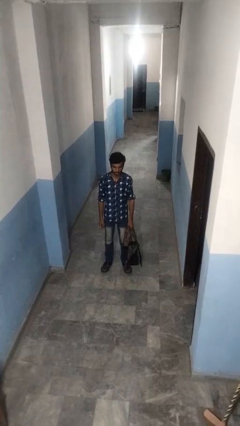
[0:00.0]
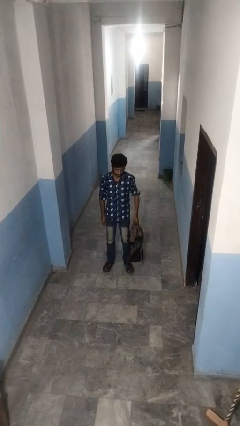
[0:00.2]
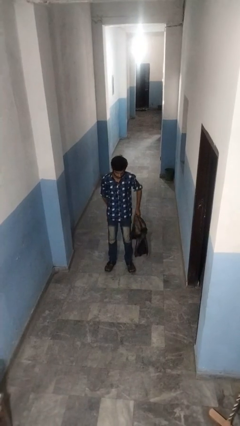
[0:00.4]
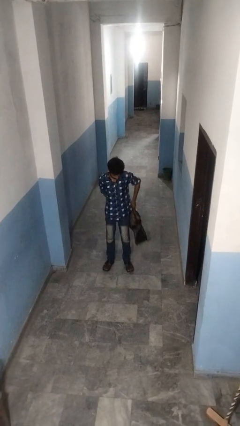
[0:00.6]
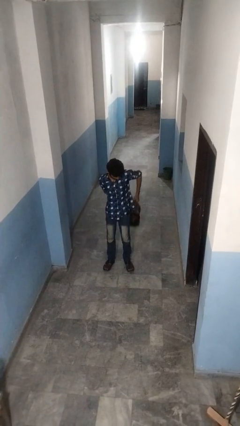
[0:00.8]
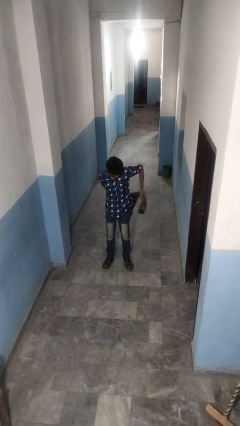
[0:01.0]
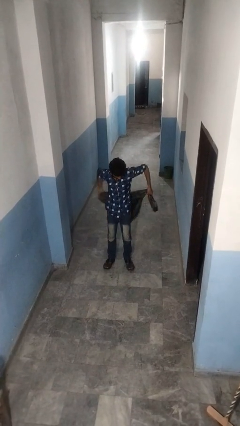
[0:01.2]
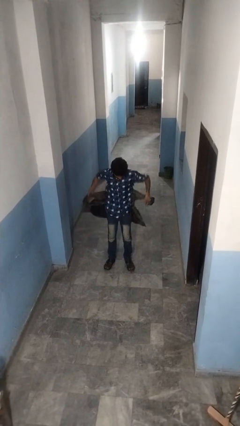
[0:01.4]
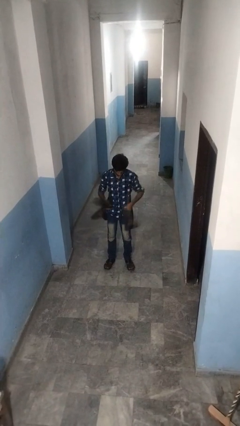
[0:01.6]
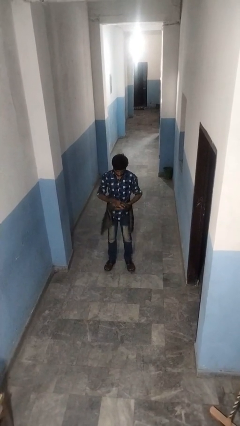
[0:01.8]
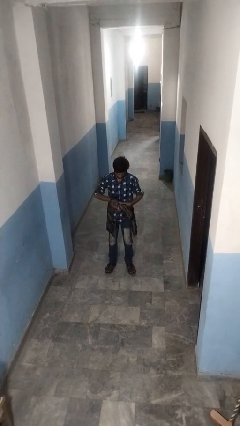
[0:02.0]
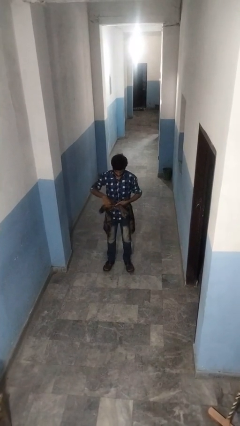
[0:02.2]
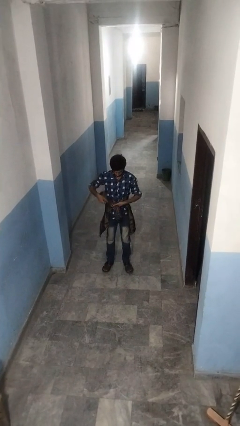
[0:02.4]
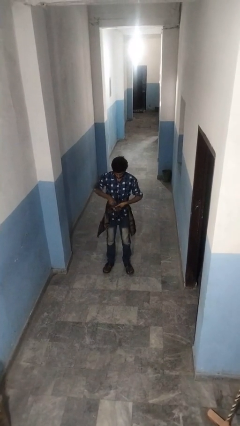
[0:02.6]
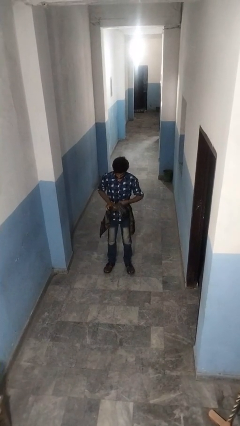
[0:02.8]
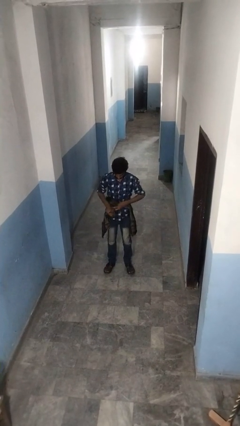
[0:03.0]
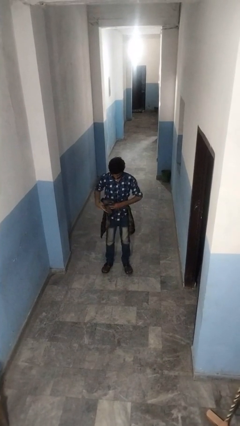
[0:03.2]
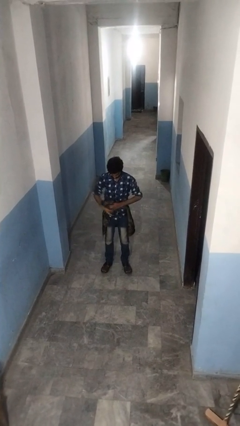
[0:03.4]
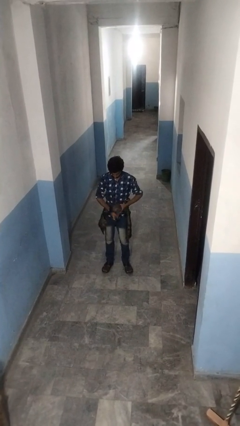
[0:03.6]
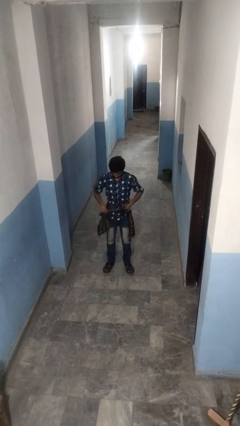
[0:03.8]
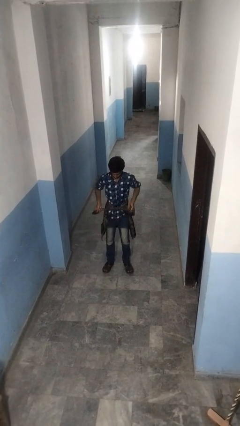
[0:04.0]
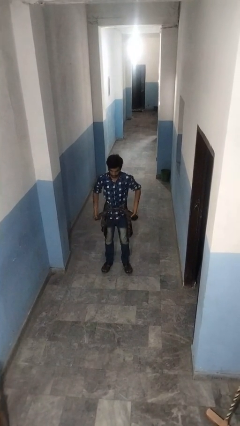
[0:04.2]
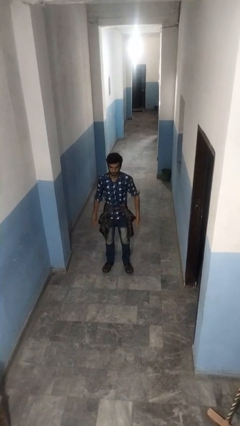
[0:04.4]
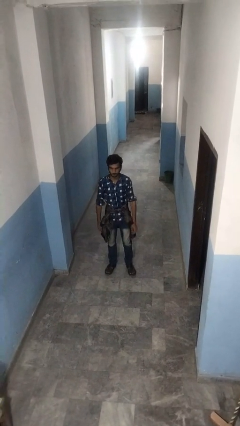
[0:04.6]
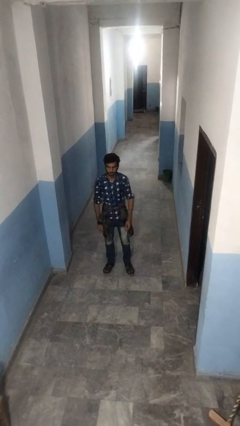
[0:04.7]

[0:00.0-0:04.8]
person ties jacket around waist

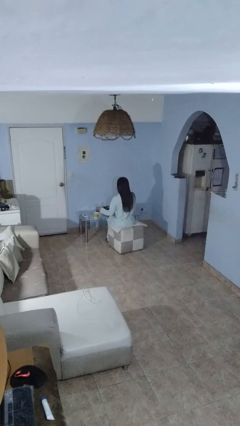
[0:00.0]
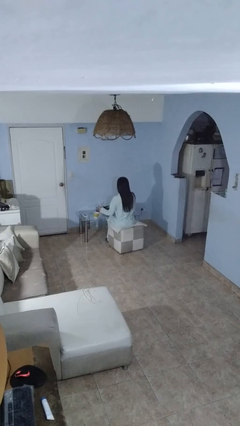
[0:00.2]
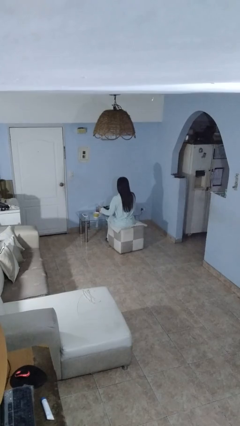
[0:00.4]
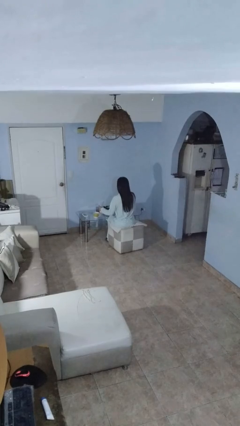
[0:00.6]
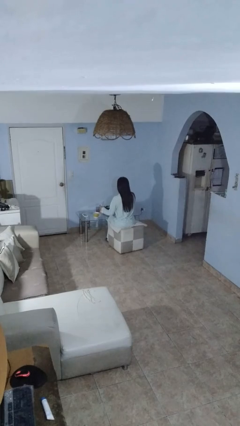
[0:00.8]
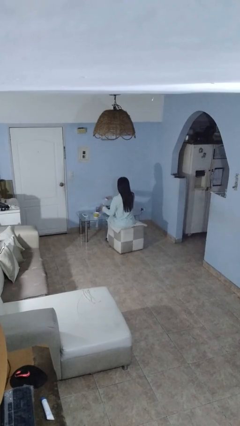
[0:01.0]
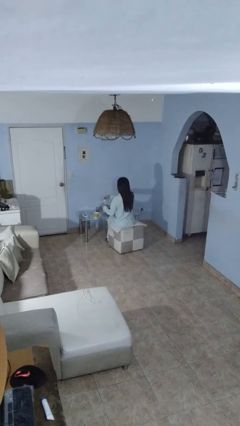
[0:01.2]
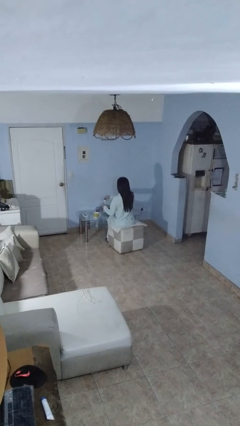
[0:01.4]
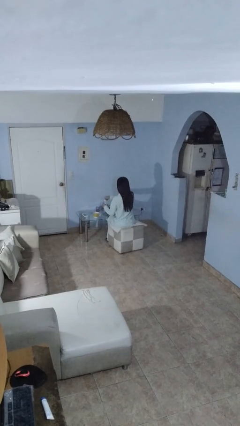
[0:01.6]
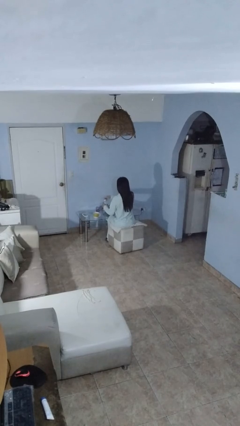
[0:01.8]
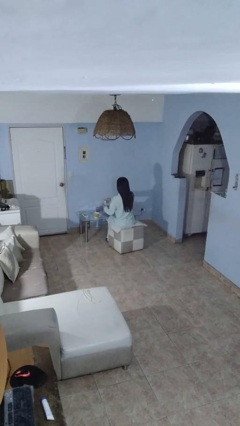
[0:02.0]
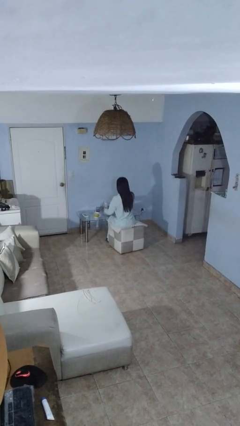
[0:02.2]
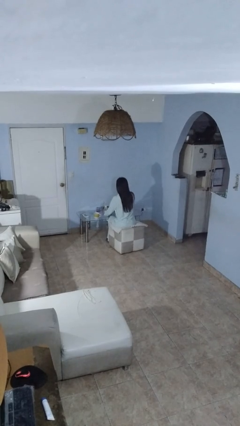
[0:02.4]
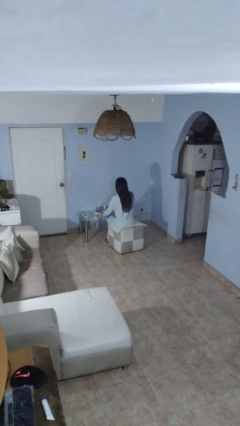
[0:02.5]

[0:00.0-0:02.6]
person screws lid to bottle

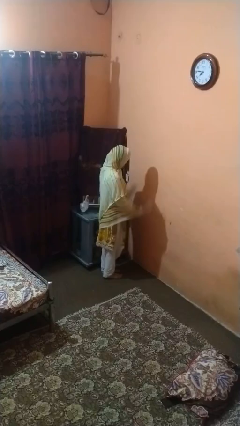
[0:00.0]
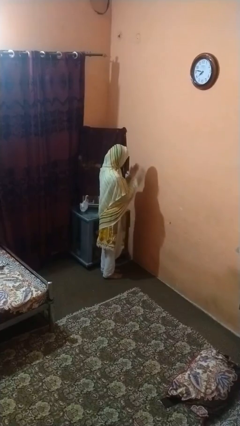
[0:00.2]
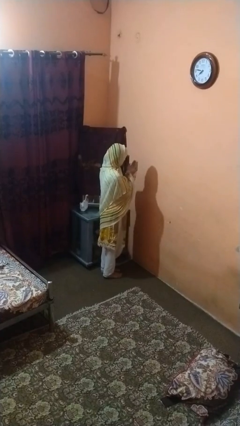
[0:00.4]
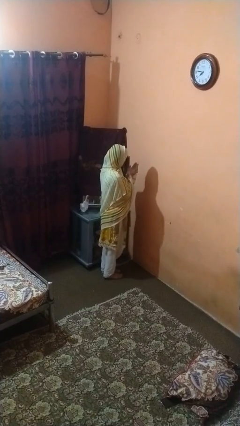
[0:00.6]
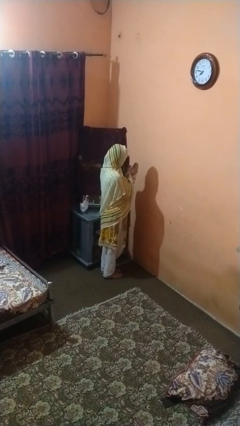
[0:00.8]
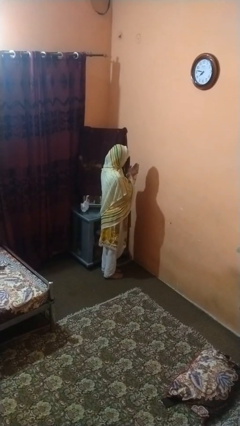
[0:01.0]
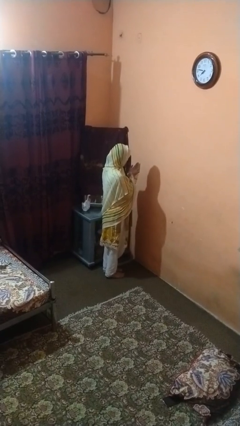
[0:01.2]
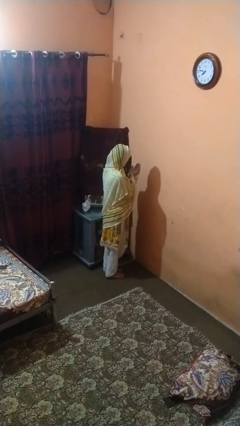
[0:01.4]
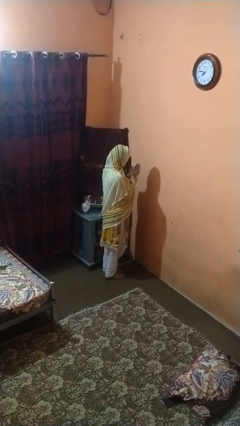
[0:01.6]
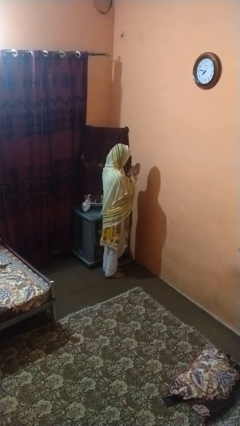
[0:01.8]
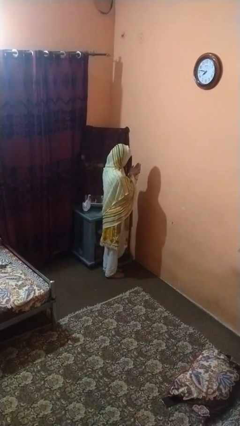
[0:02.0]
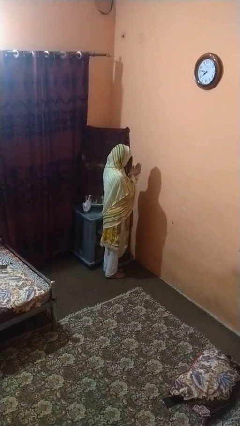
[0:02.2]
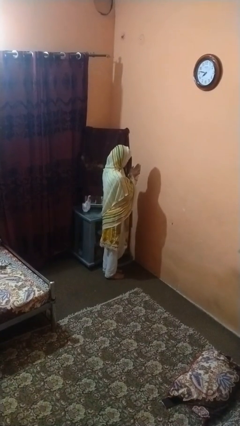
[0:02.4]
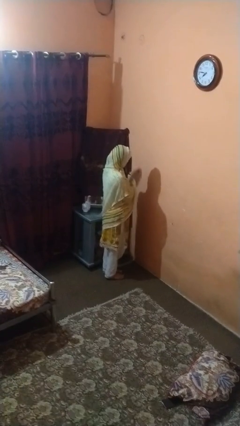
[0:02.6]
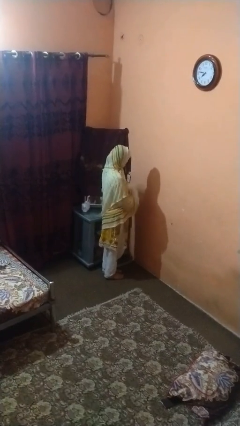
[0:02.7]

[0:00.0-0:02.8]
person prays

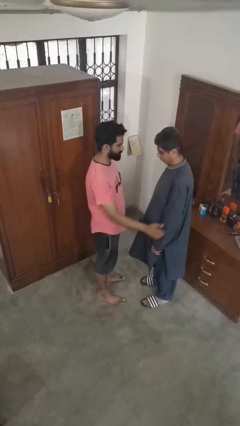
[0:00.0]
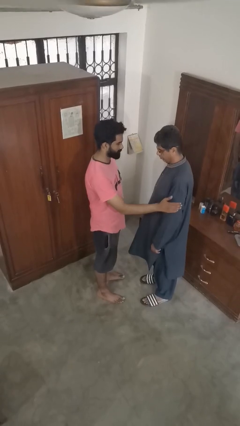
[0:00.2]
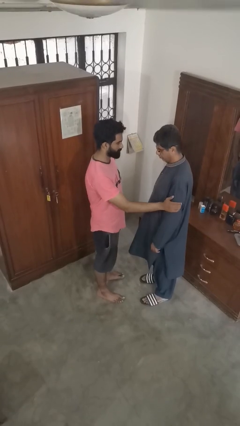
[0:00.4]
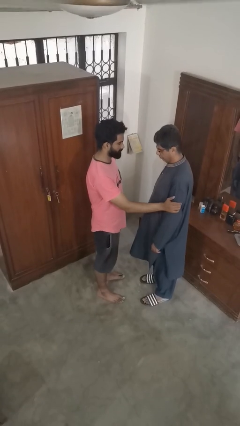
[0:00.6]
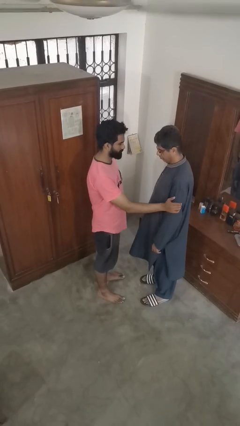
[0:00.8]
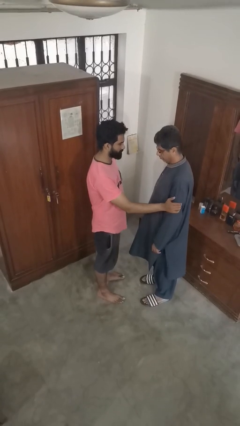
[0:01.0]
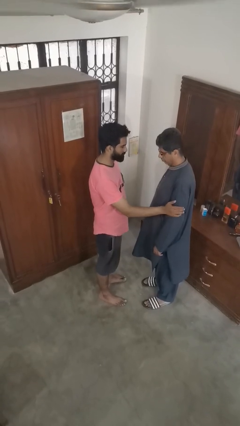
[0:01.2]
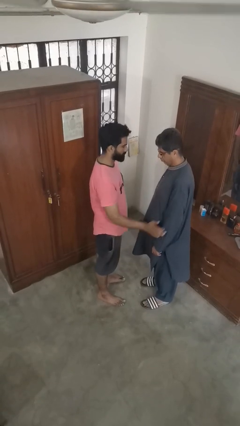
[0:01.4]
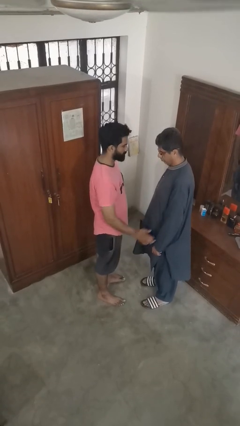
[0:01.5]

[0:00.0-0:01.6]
person grabs person by bicep

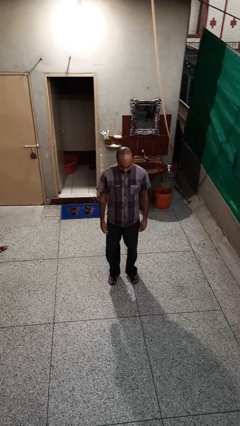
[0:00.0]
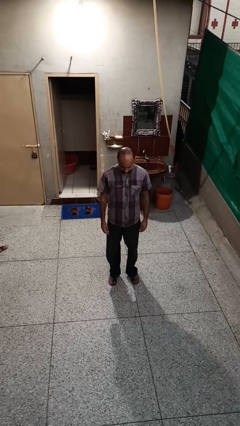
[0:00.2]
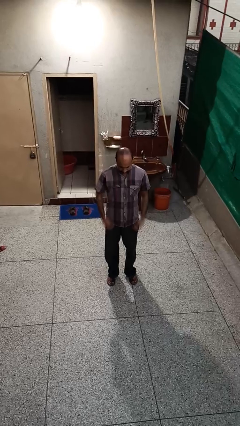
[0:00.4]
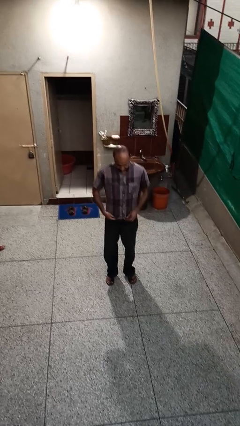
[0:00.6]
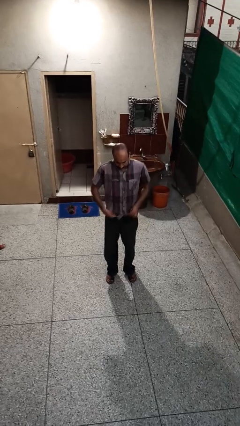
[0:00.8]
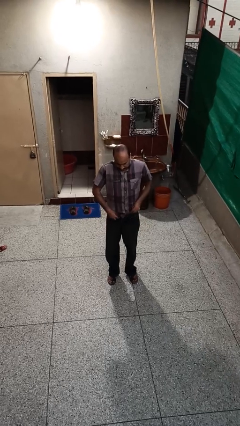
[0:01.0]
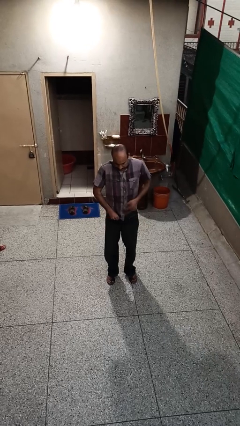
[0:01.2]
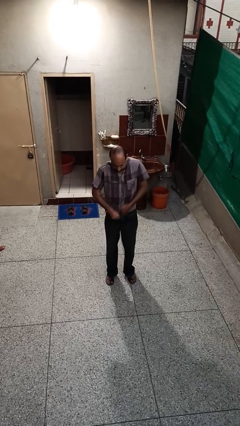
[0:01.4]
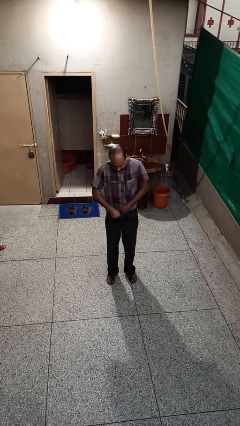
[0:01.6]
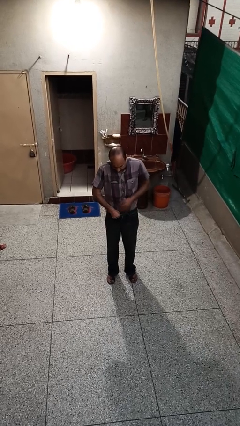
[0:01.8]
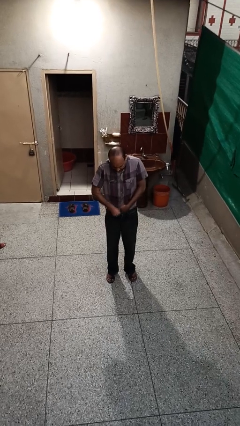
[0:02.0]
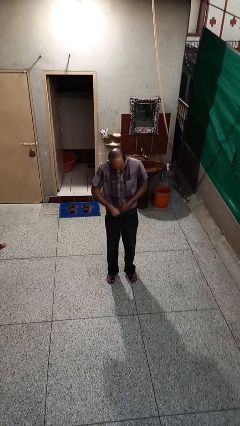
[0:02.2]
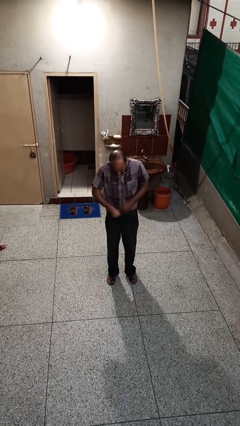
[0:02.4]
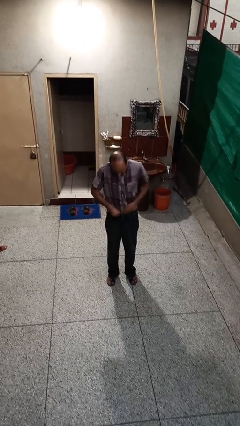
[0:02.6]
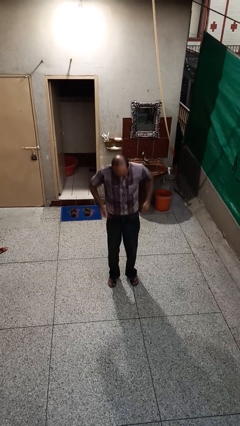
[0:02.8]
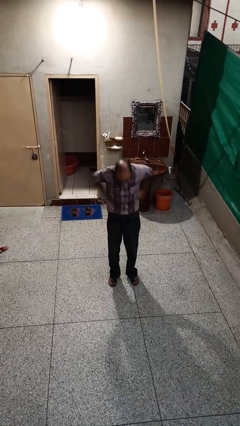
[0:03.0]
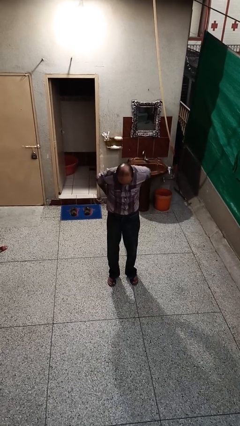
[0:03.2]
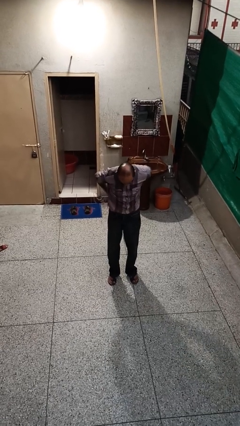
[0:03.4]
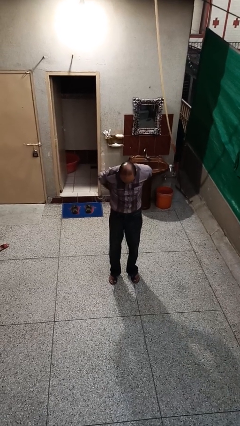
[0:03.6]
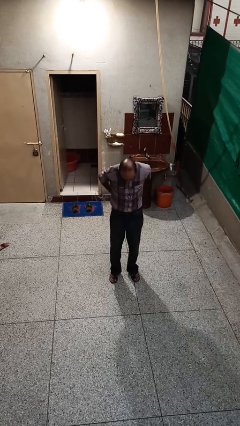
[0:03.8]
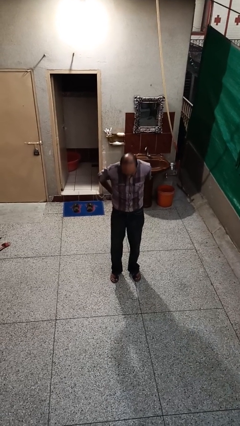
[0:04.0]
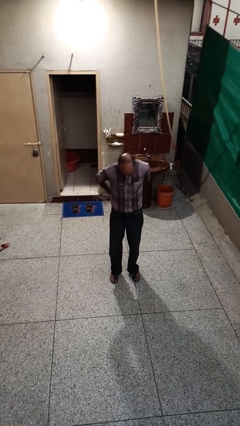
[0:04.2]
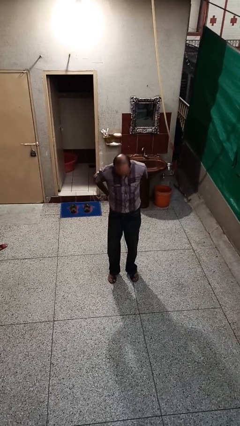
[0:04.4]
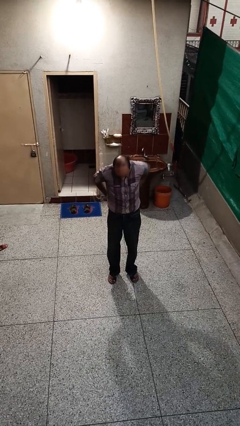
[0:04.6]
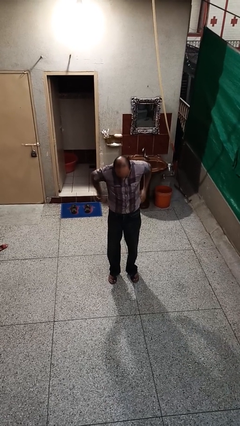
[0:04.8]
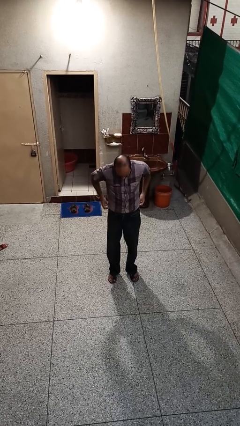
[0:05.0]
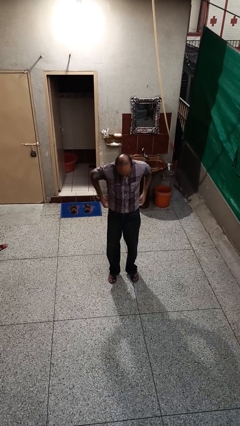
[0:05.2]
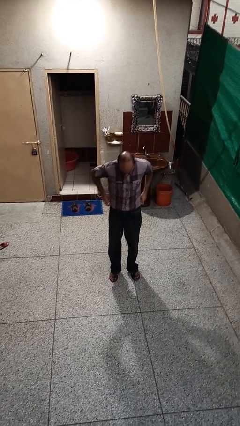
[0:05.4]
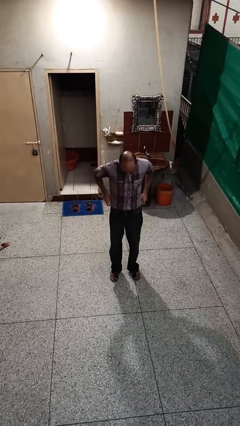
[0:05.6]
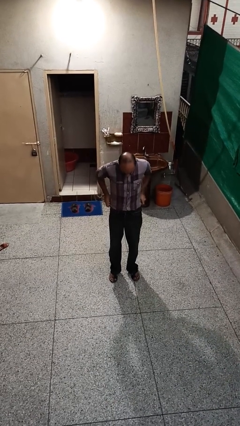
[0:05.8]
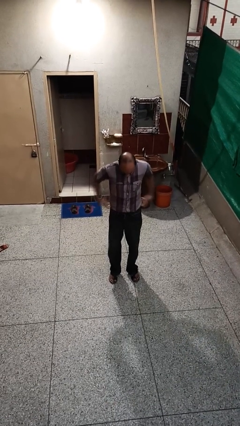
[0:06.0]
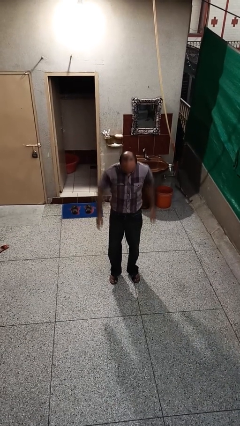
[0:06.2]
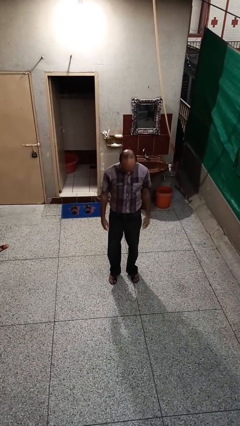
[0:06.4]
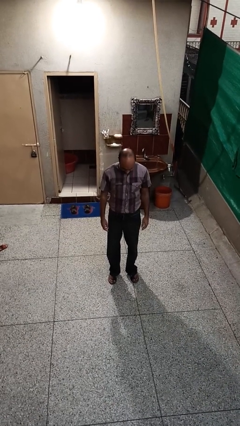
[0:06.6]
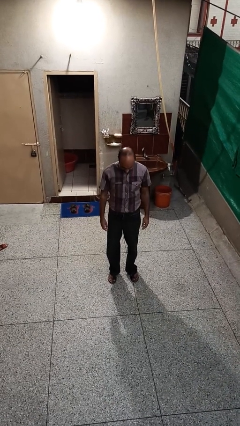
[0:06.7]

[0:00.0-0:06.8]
person tucks in shirt
